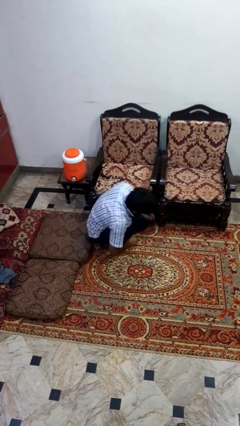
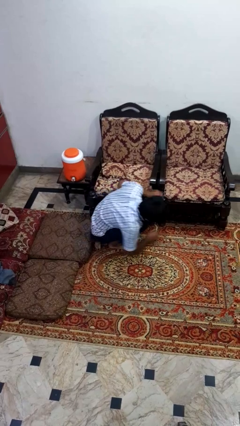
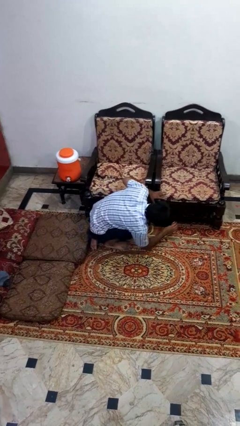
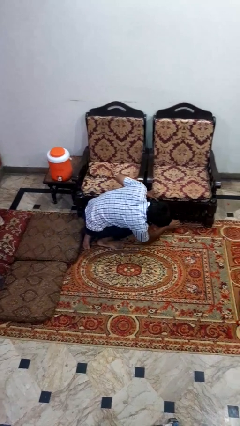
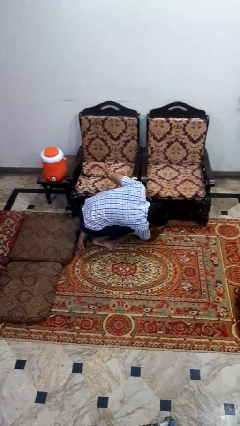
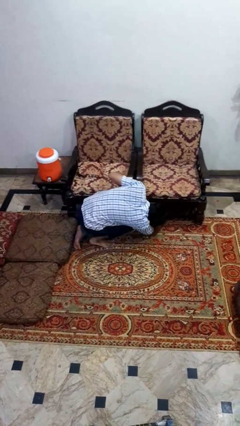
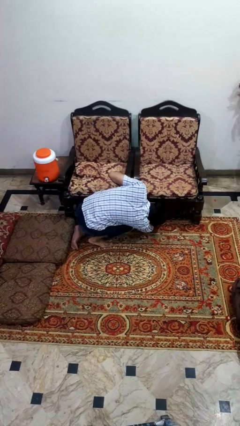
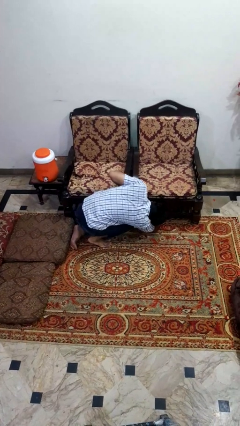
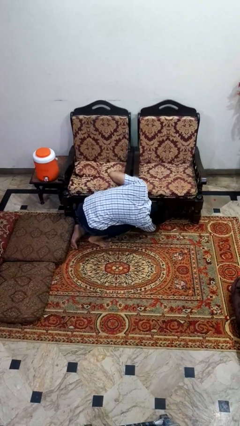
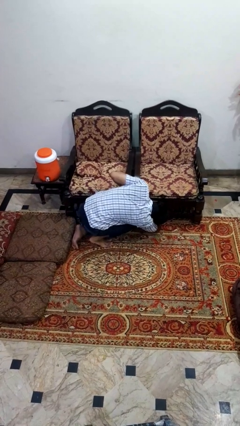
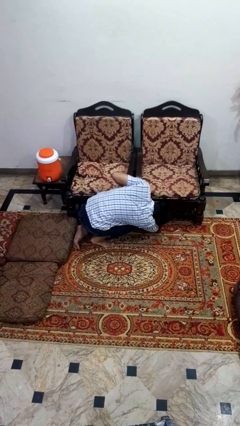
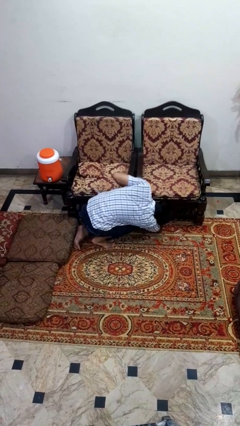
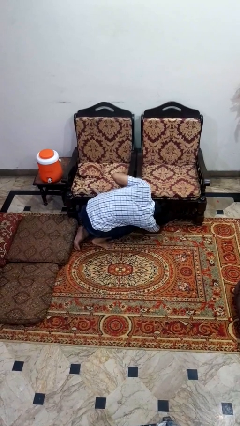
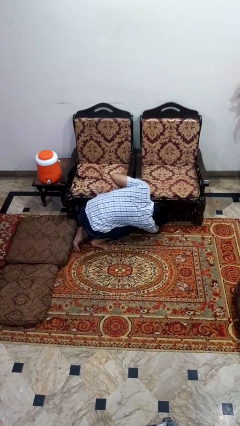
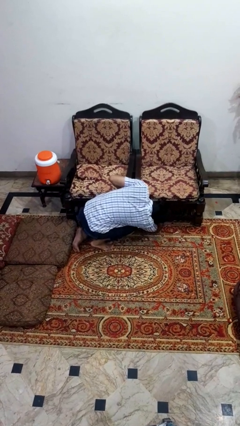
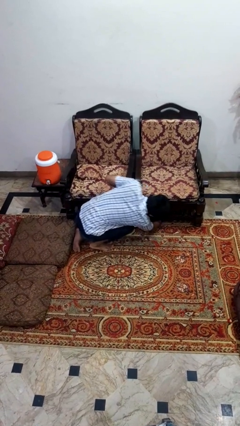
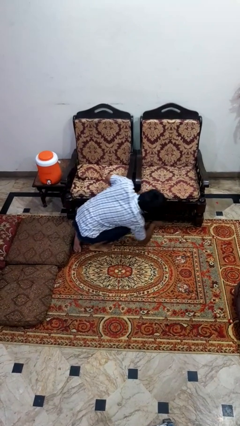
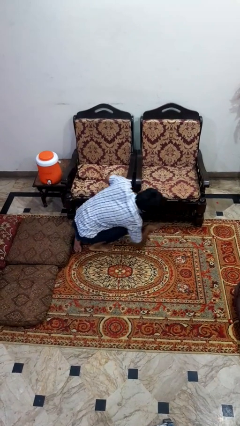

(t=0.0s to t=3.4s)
person searches under couch

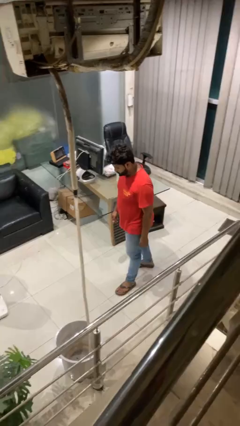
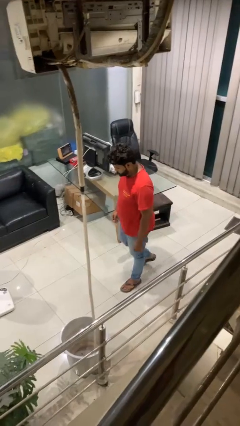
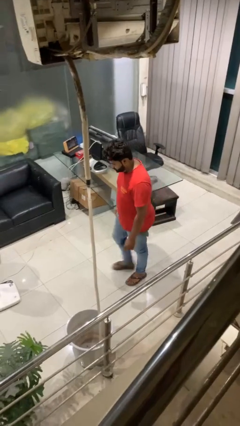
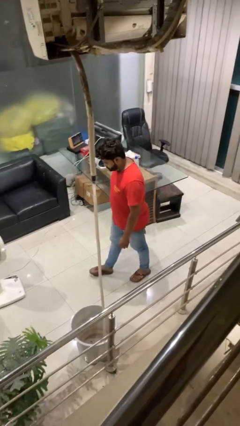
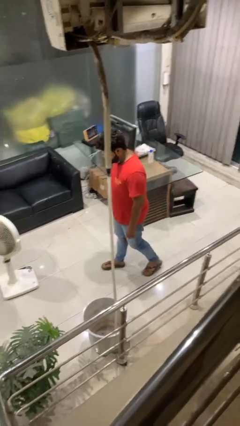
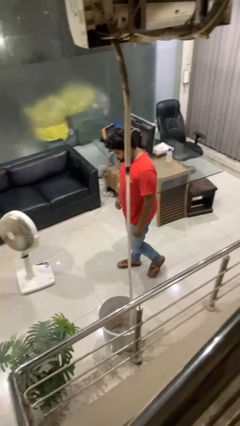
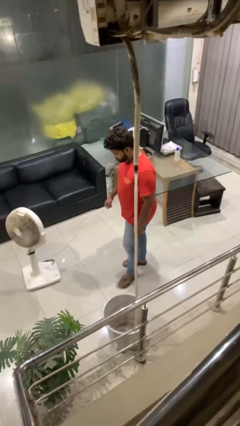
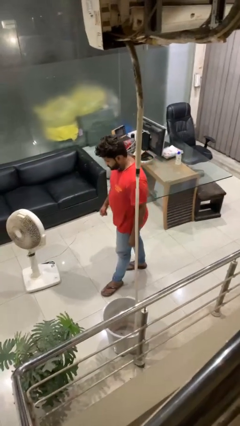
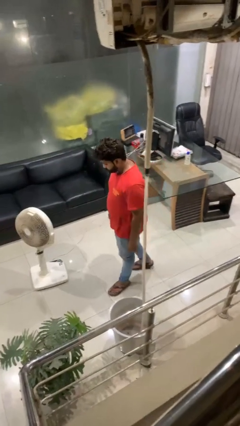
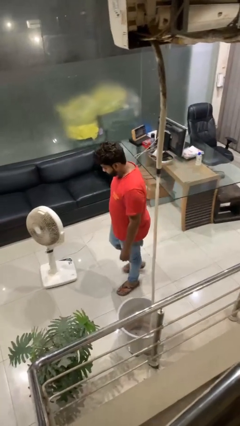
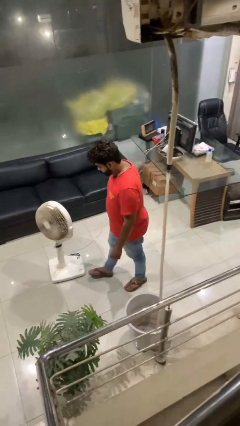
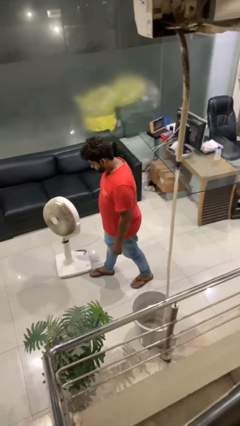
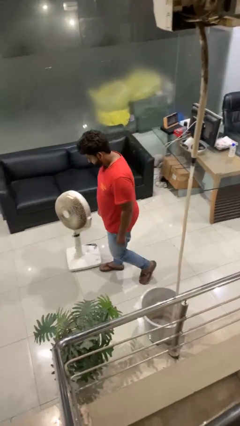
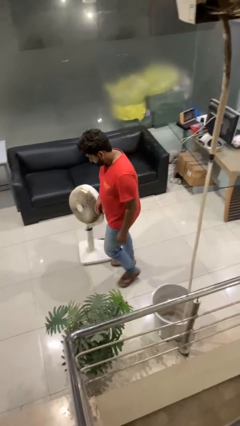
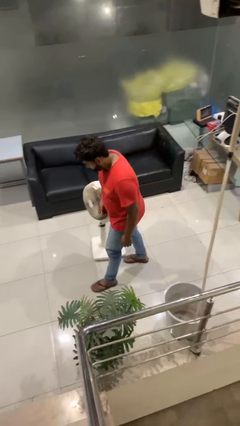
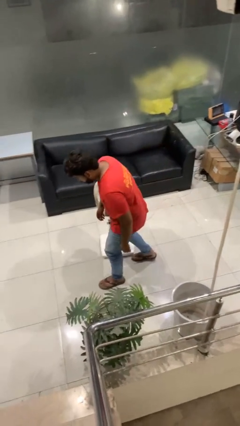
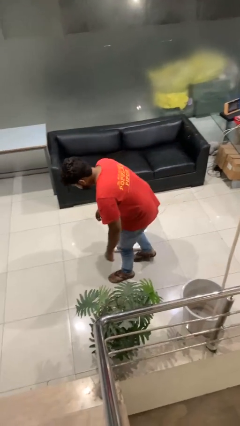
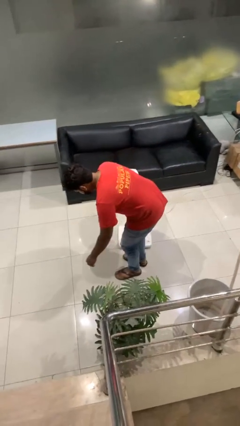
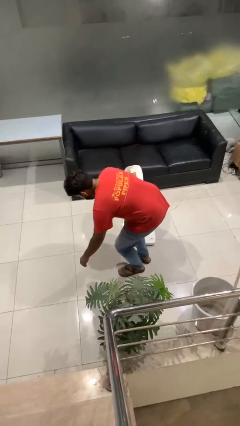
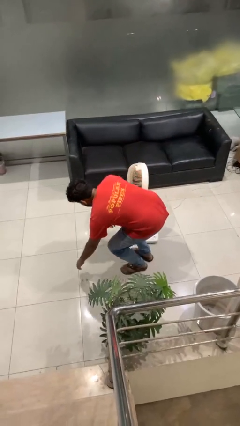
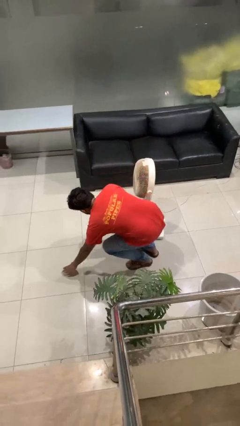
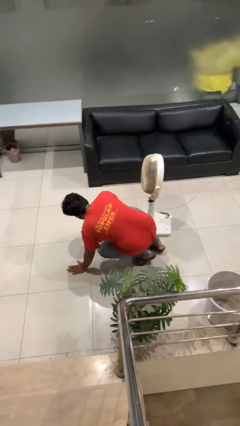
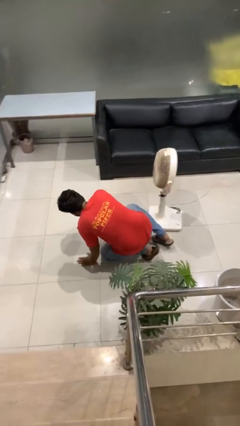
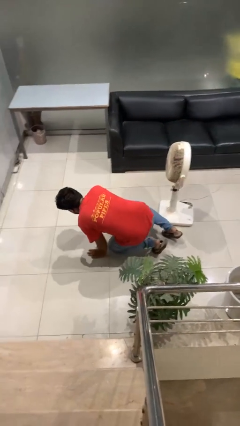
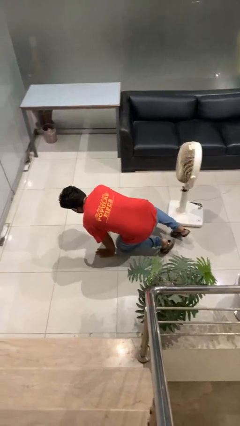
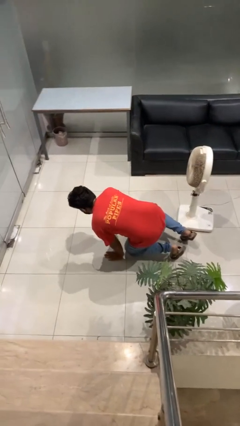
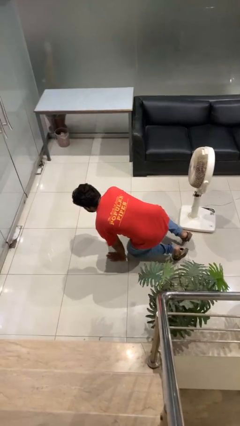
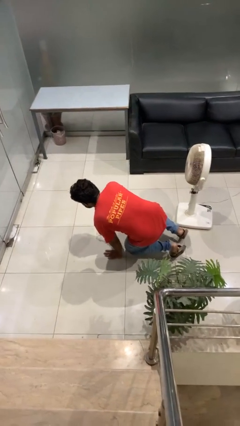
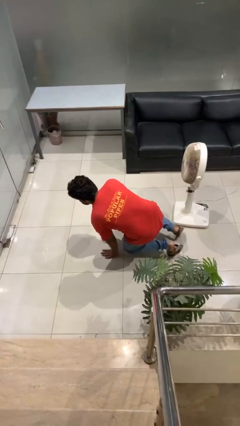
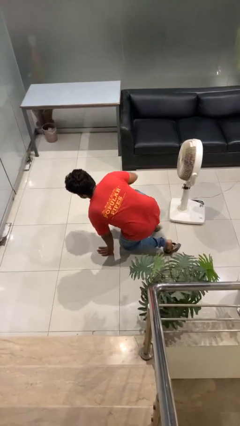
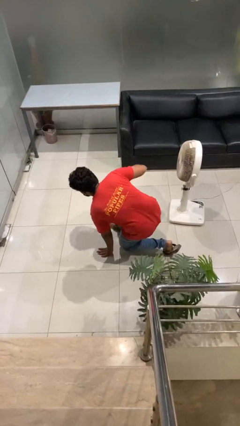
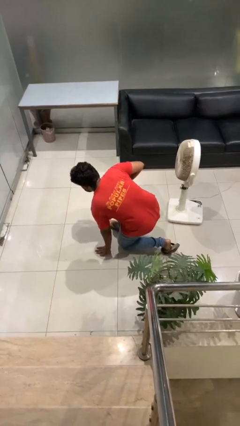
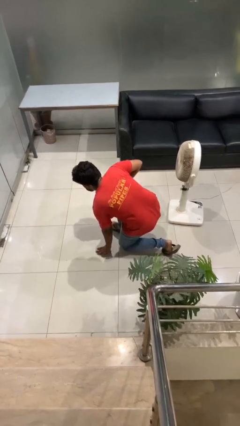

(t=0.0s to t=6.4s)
person trips on object on floor

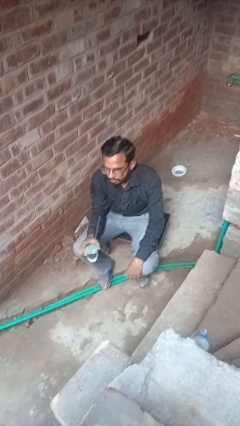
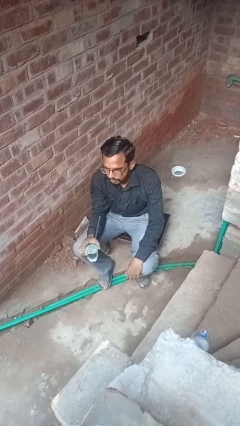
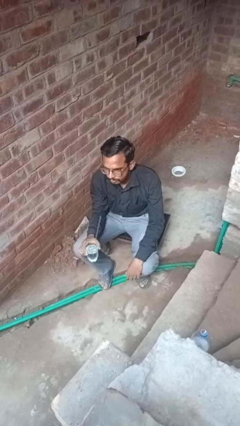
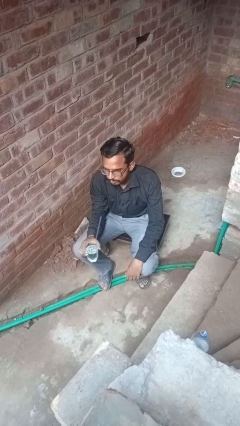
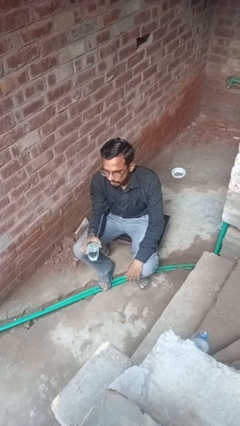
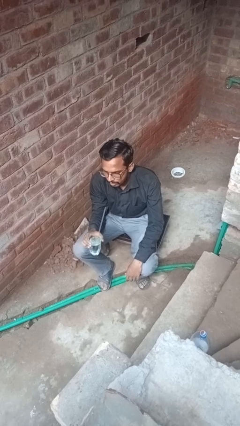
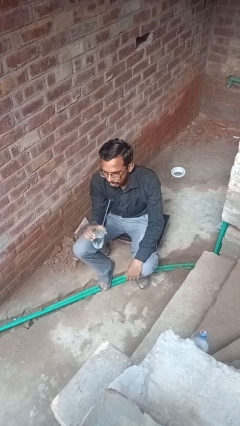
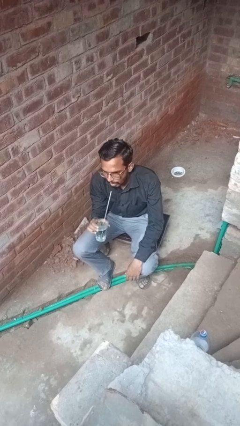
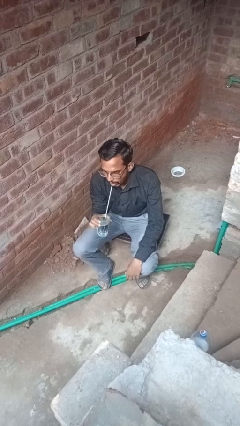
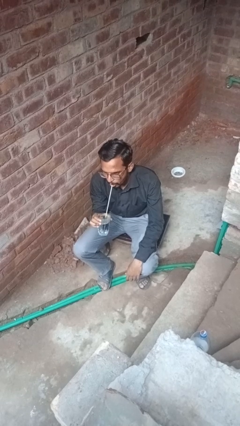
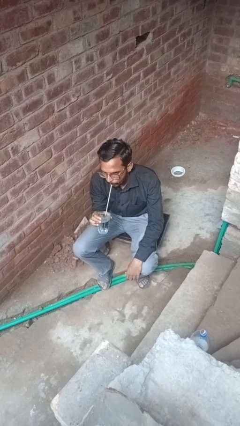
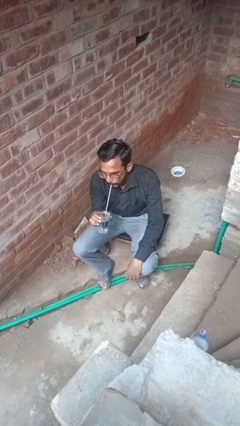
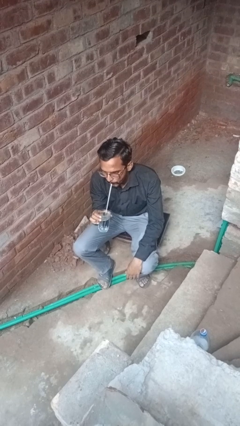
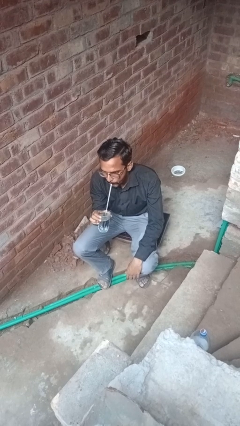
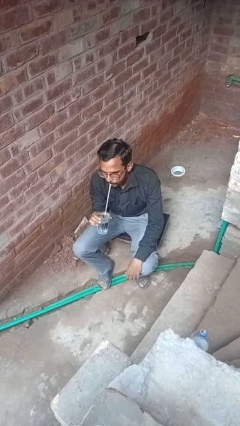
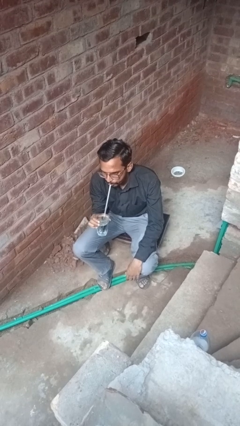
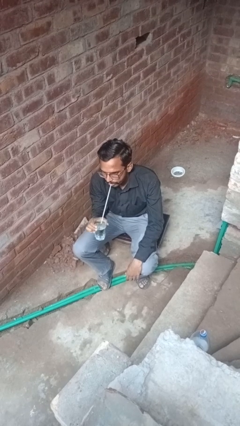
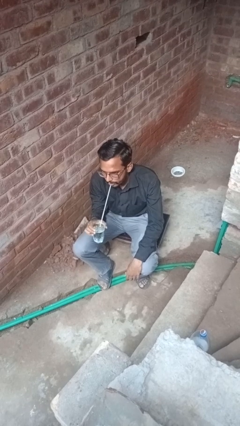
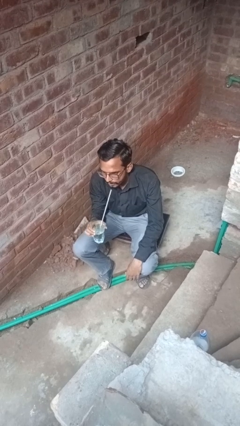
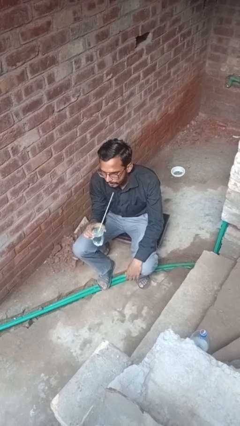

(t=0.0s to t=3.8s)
person drinks from straw

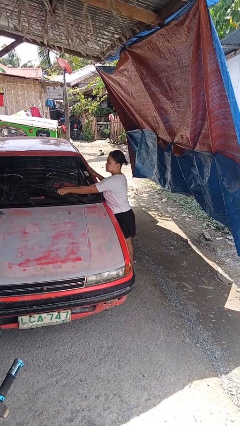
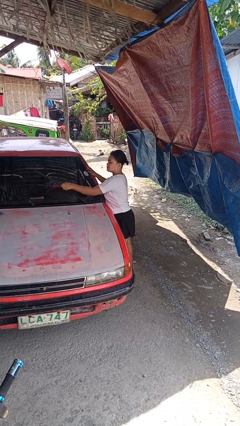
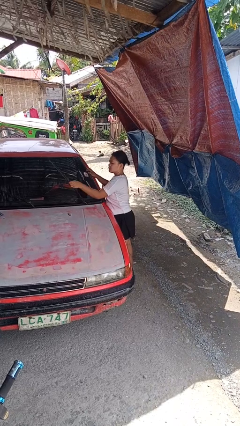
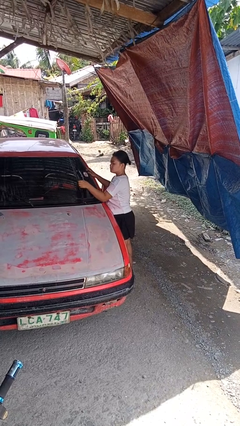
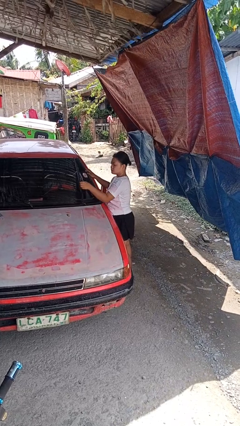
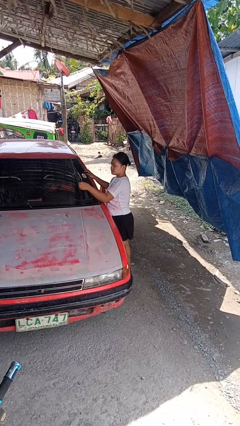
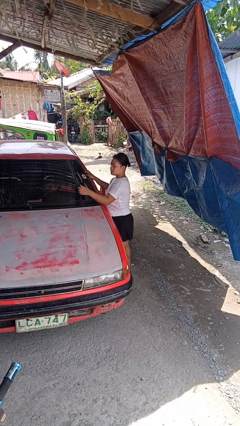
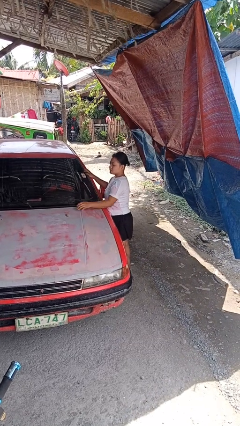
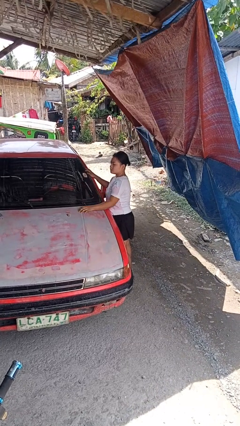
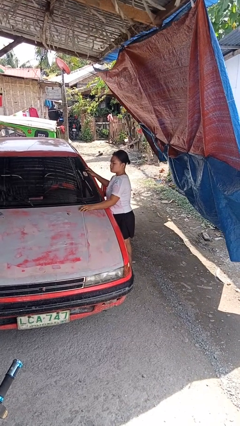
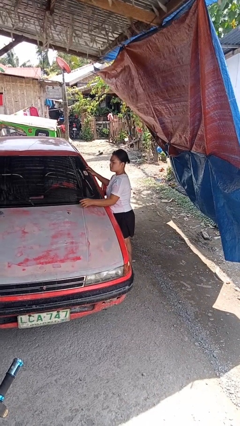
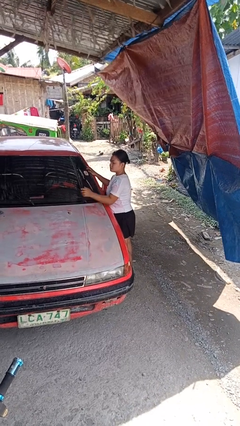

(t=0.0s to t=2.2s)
person flips up car wipers

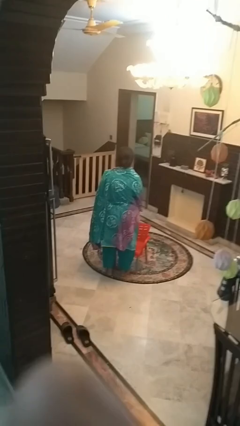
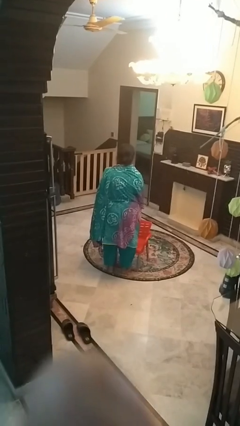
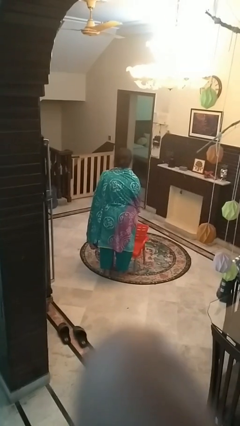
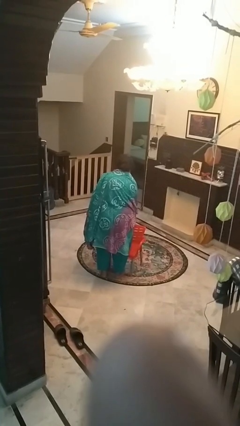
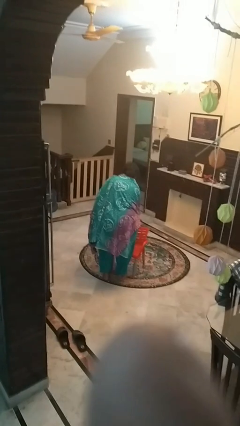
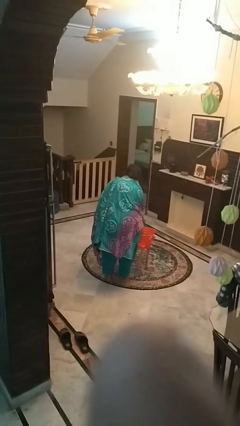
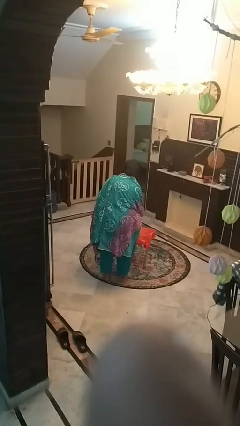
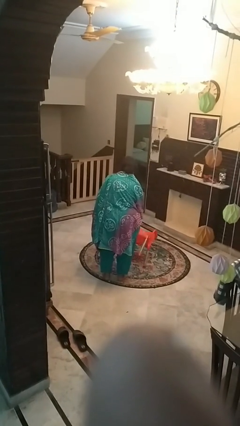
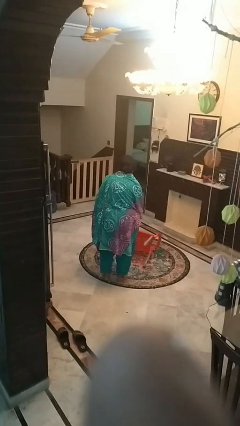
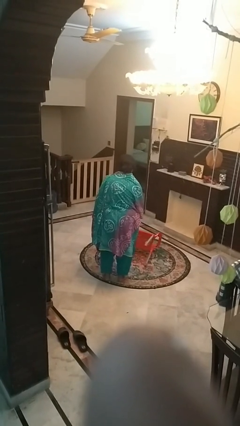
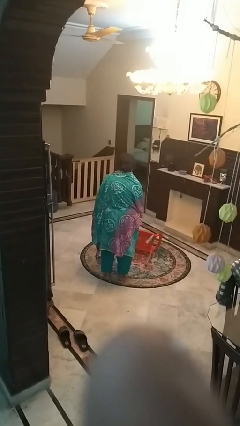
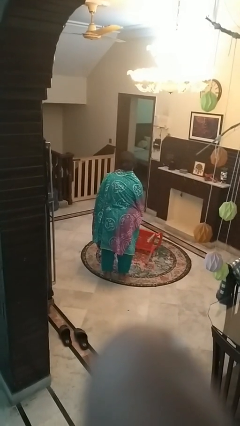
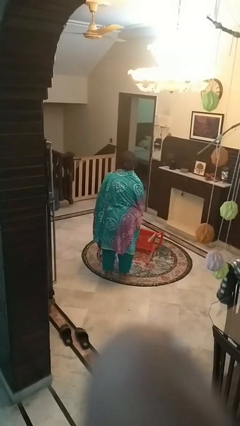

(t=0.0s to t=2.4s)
person knocks over furniture
